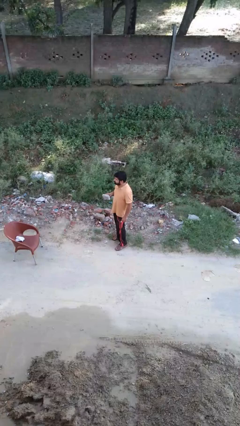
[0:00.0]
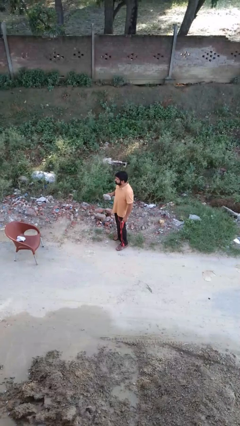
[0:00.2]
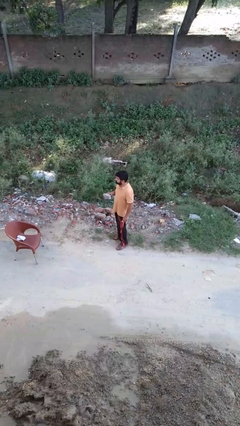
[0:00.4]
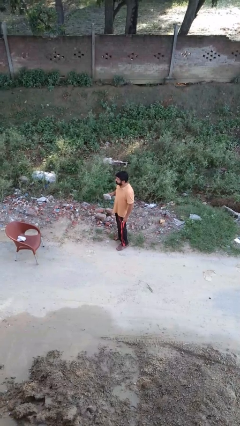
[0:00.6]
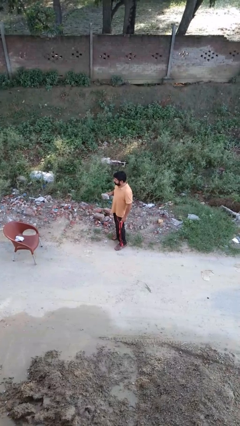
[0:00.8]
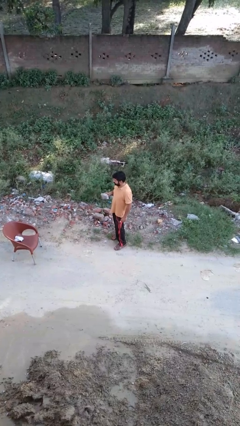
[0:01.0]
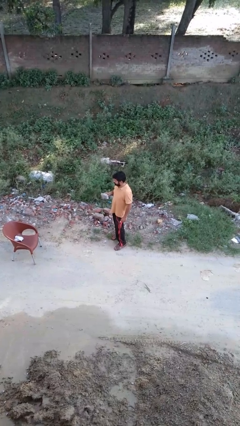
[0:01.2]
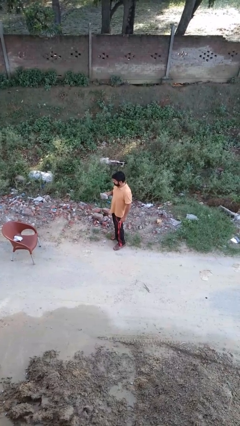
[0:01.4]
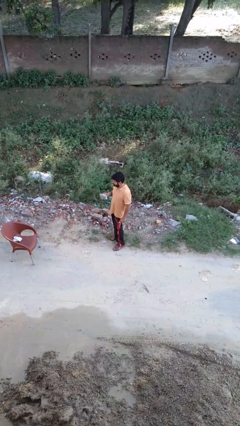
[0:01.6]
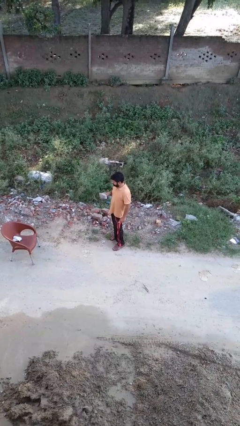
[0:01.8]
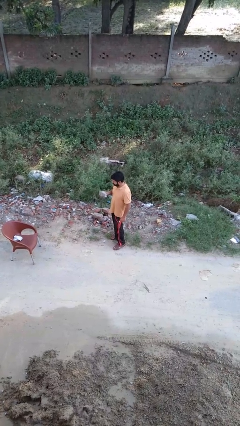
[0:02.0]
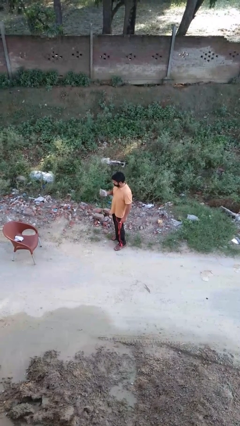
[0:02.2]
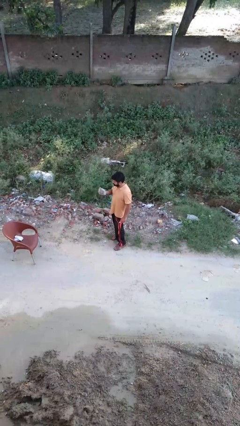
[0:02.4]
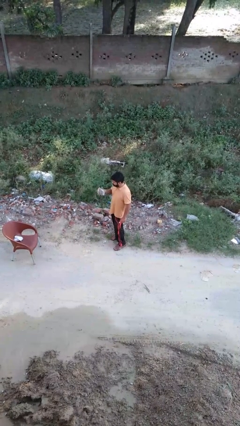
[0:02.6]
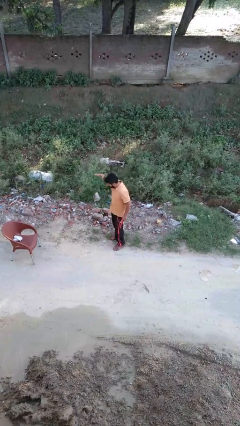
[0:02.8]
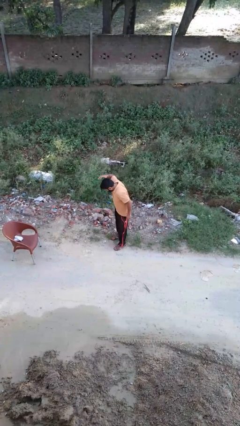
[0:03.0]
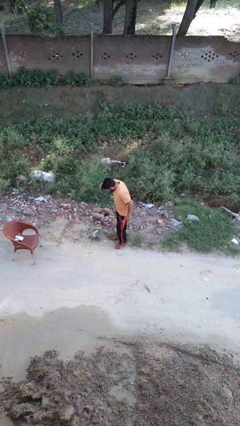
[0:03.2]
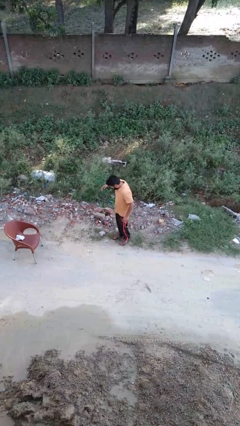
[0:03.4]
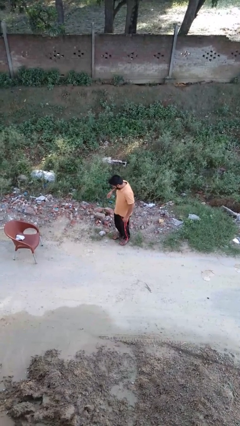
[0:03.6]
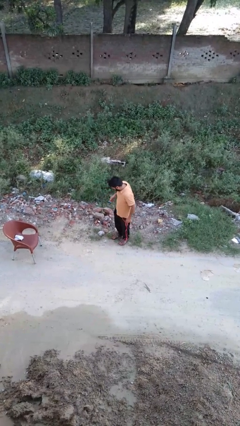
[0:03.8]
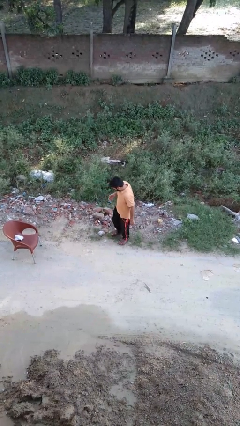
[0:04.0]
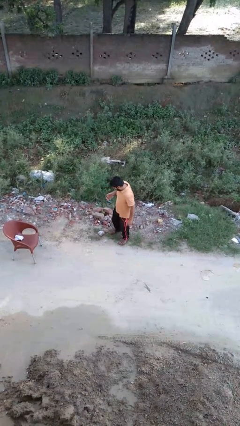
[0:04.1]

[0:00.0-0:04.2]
person drops object

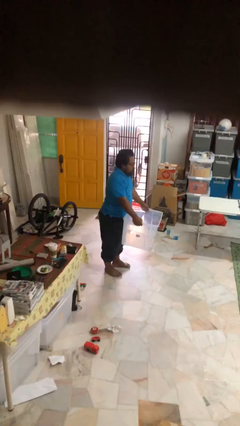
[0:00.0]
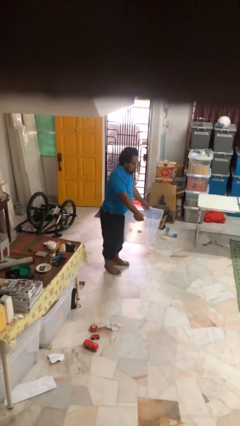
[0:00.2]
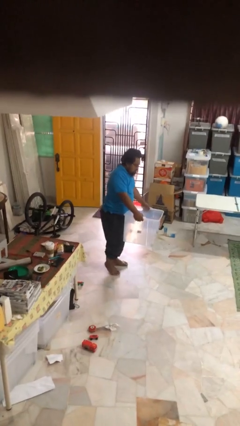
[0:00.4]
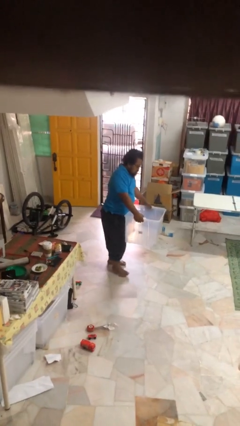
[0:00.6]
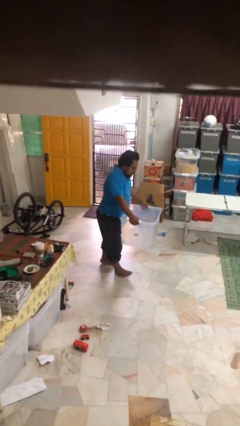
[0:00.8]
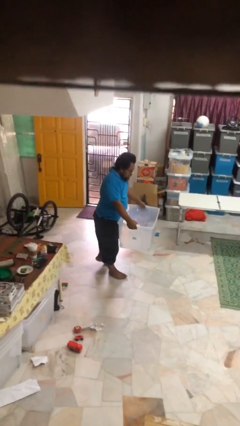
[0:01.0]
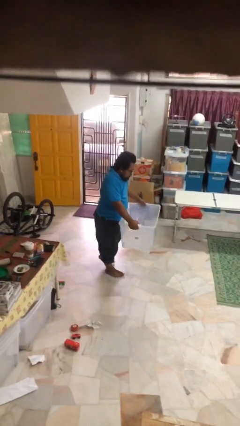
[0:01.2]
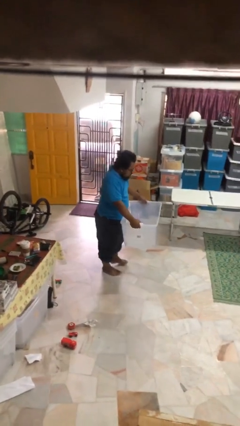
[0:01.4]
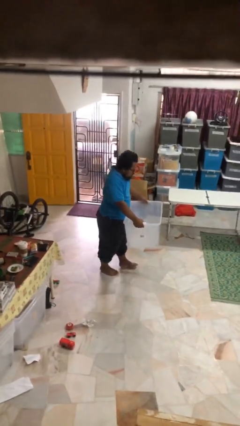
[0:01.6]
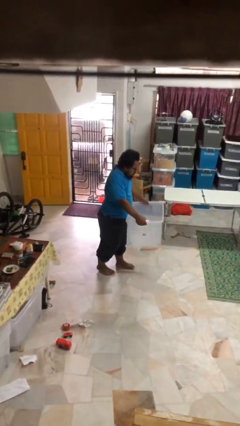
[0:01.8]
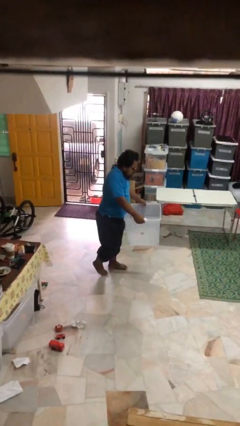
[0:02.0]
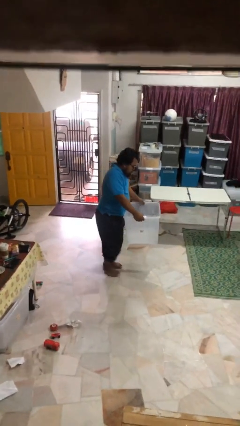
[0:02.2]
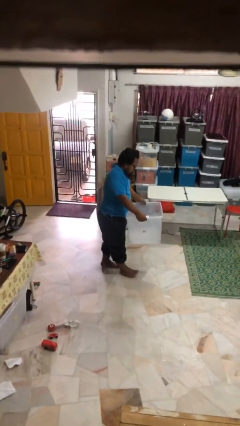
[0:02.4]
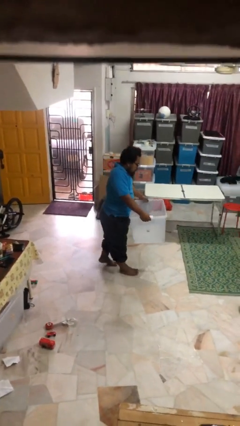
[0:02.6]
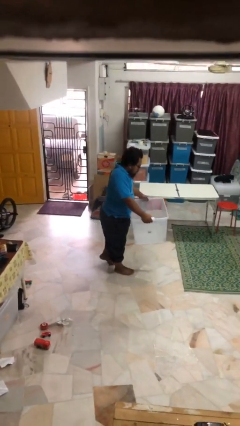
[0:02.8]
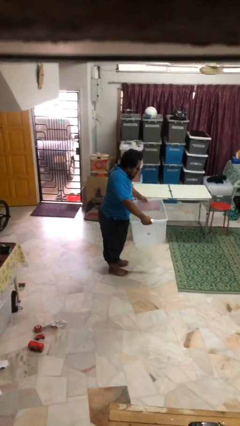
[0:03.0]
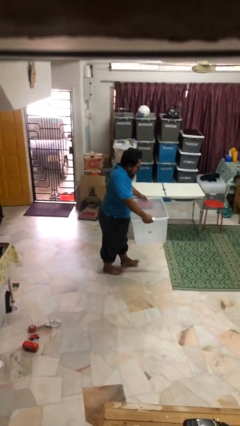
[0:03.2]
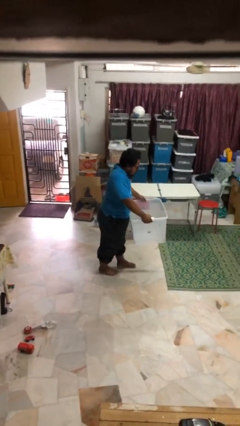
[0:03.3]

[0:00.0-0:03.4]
person carries heavy object

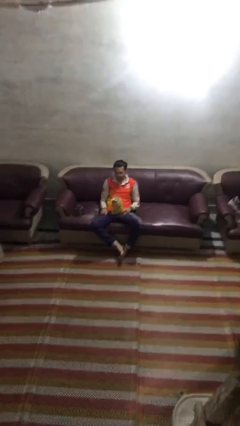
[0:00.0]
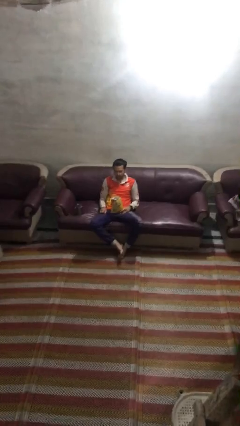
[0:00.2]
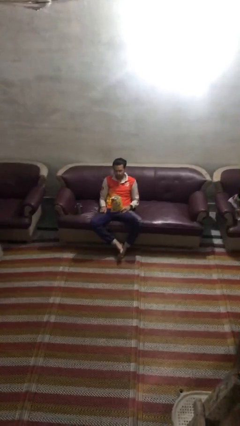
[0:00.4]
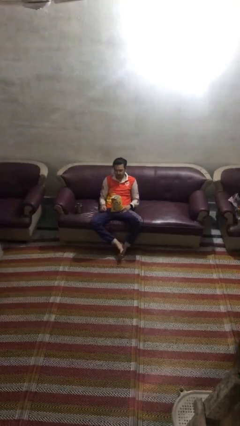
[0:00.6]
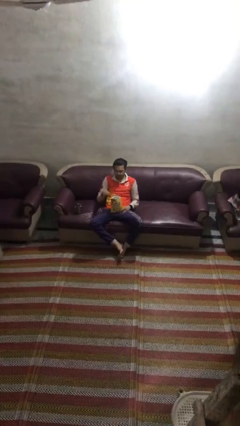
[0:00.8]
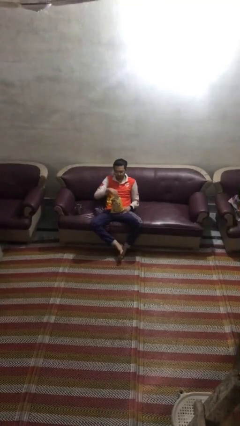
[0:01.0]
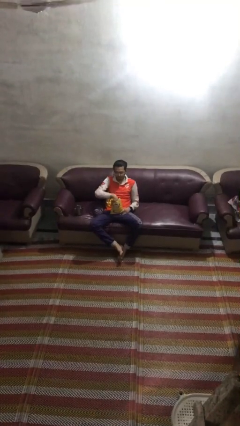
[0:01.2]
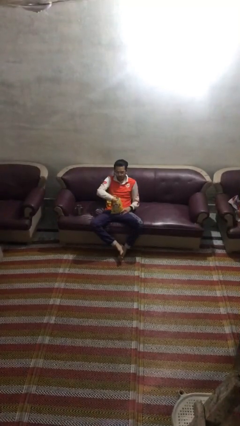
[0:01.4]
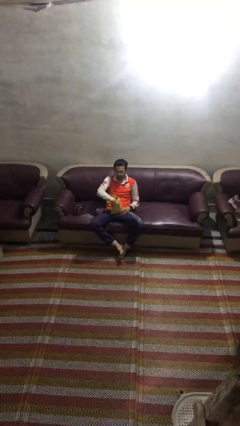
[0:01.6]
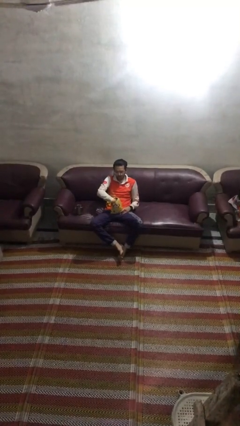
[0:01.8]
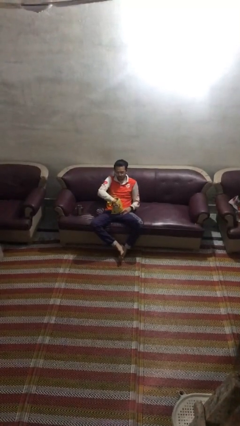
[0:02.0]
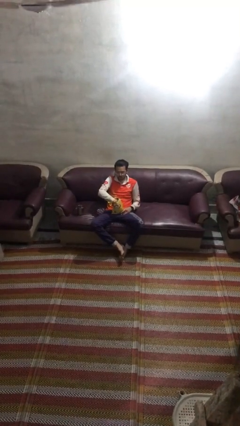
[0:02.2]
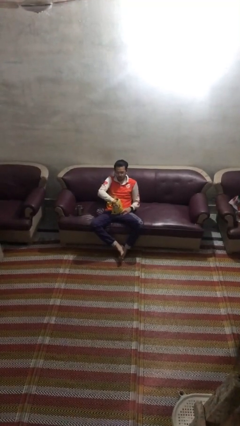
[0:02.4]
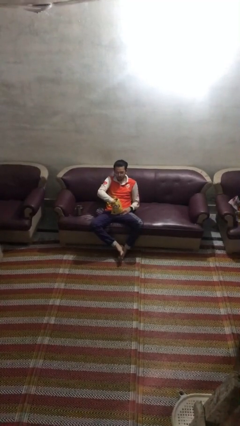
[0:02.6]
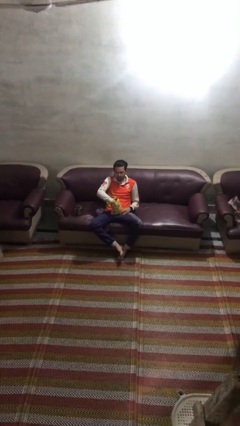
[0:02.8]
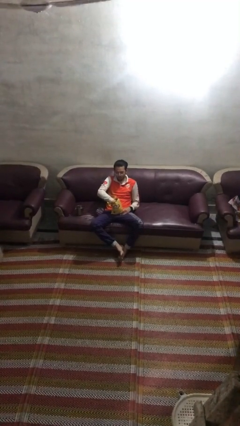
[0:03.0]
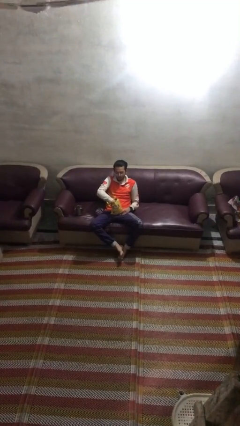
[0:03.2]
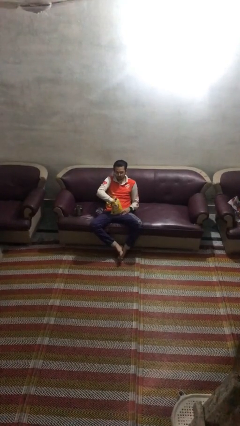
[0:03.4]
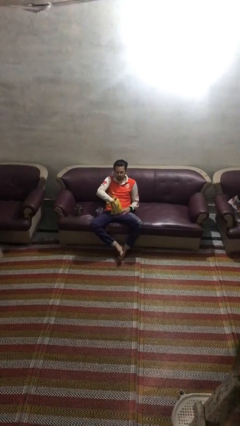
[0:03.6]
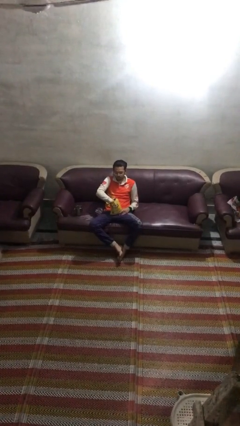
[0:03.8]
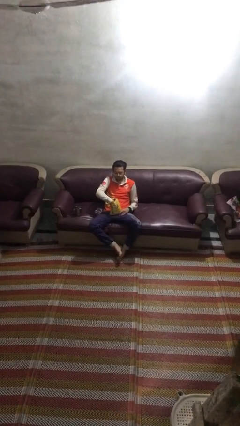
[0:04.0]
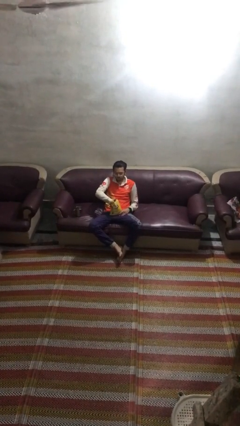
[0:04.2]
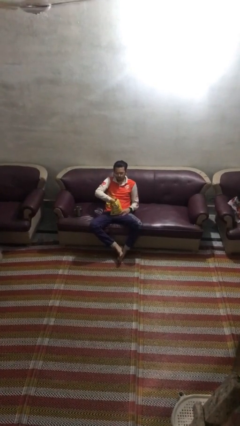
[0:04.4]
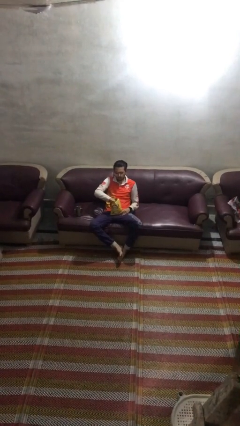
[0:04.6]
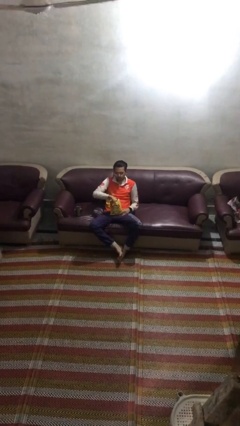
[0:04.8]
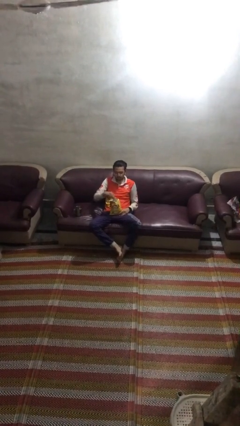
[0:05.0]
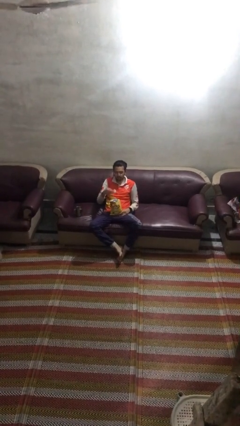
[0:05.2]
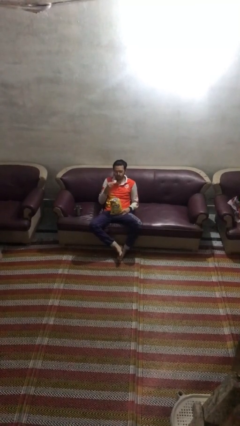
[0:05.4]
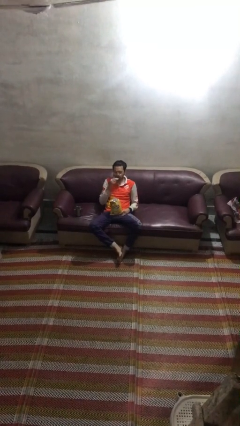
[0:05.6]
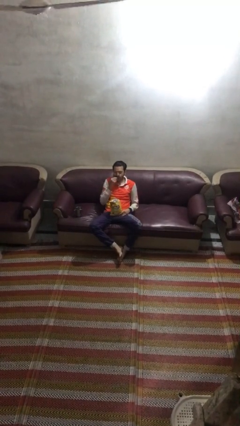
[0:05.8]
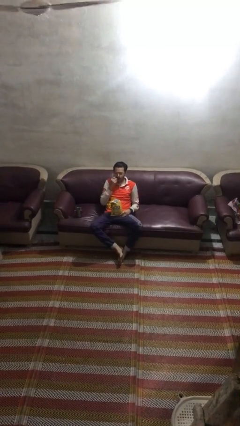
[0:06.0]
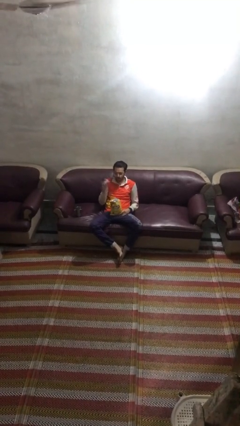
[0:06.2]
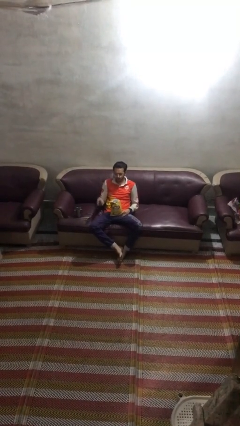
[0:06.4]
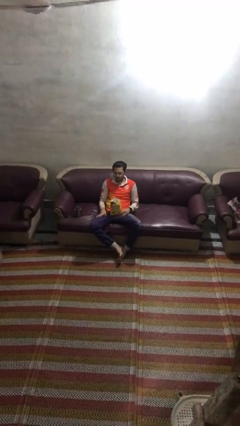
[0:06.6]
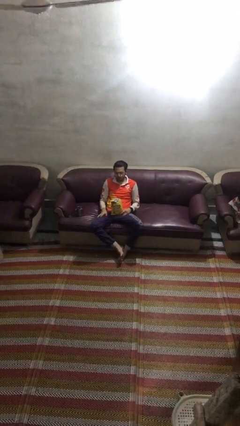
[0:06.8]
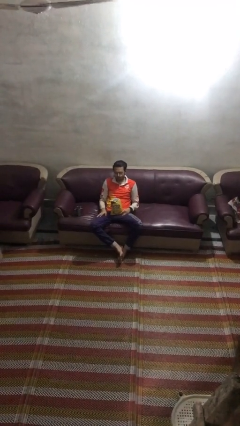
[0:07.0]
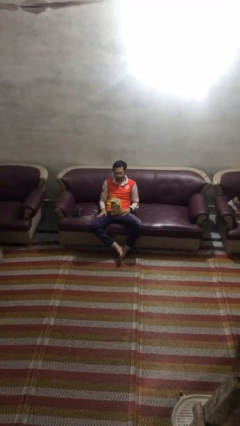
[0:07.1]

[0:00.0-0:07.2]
person eats snack from bag

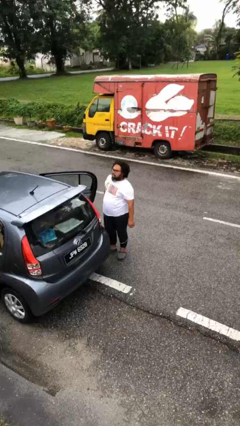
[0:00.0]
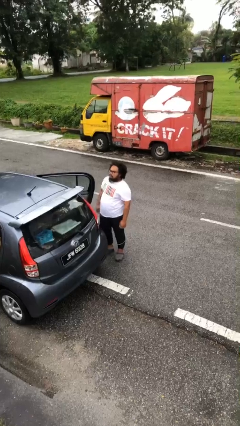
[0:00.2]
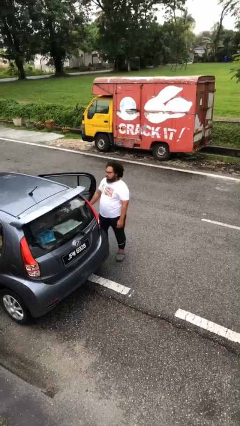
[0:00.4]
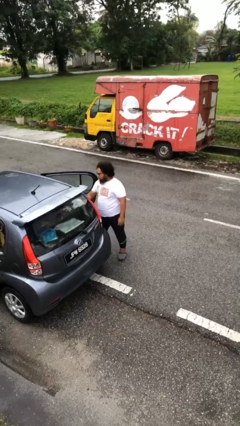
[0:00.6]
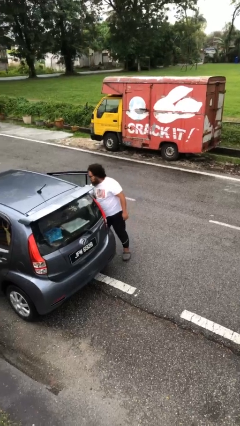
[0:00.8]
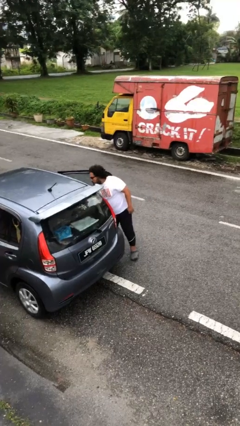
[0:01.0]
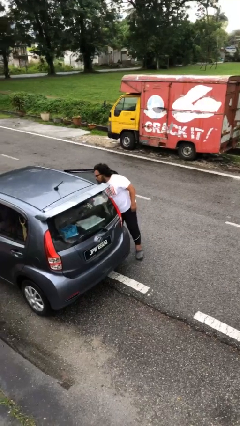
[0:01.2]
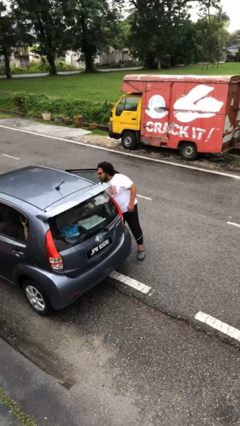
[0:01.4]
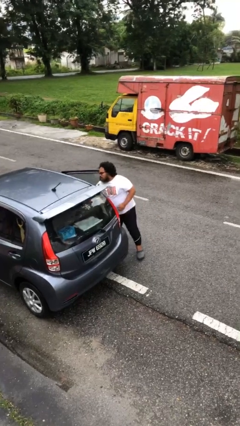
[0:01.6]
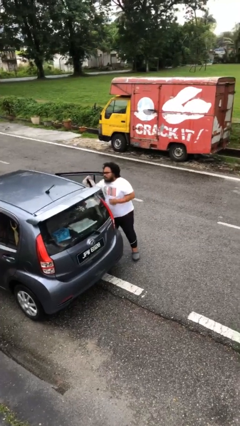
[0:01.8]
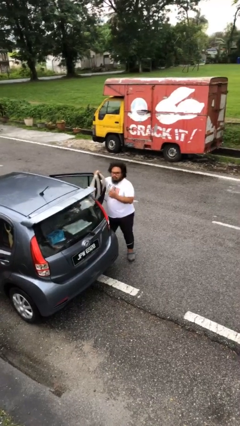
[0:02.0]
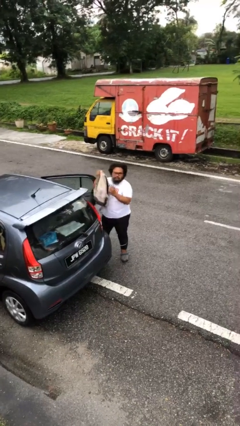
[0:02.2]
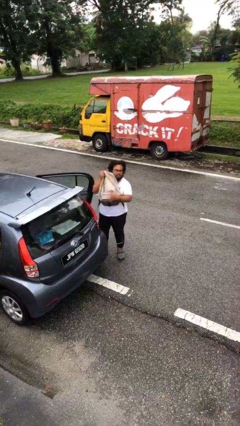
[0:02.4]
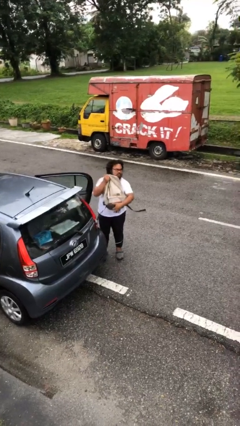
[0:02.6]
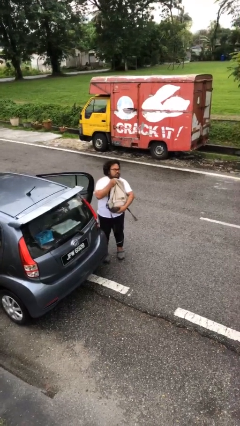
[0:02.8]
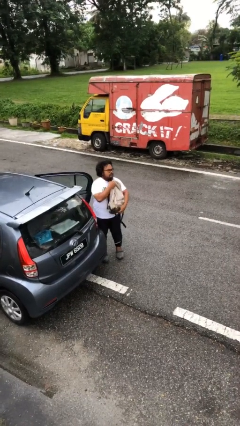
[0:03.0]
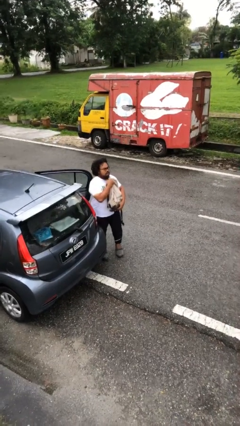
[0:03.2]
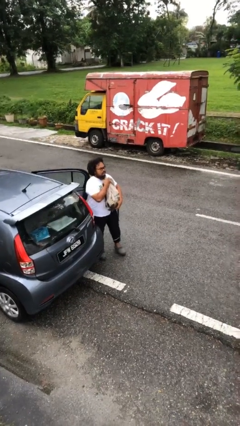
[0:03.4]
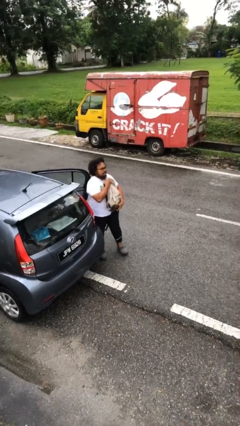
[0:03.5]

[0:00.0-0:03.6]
person unloads car
